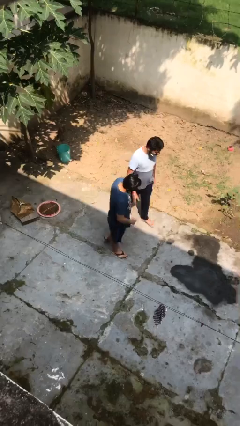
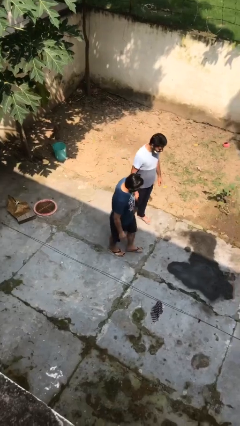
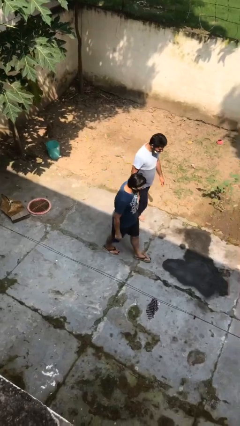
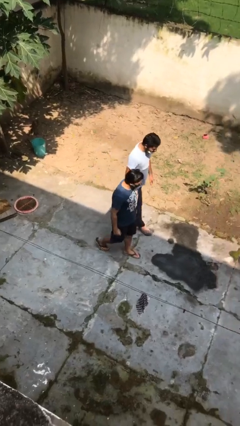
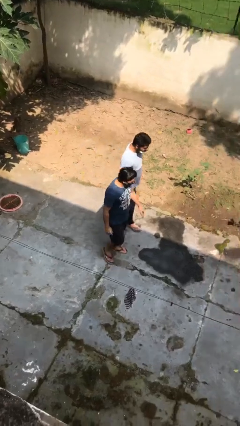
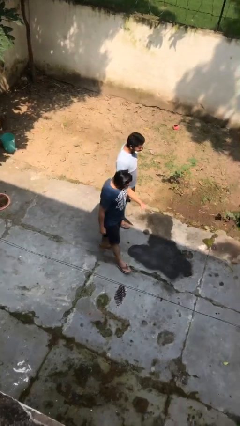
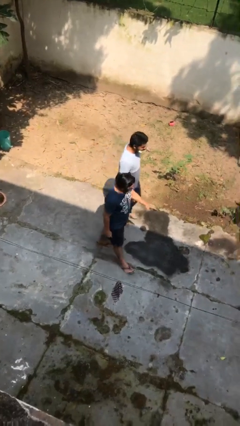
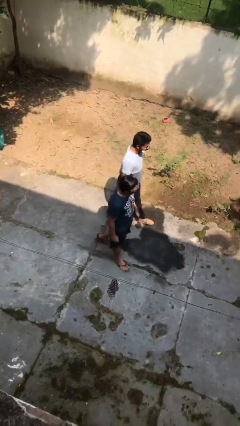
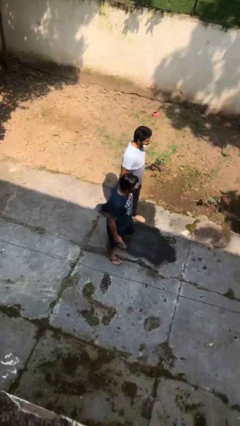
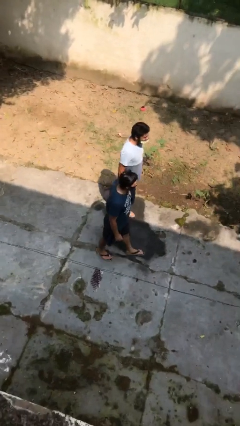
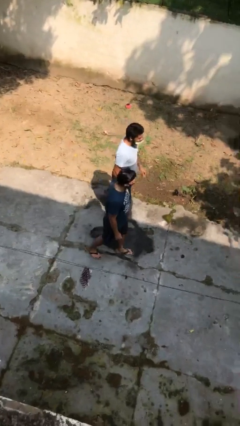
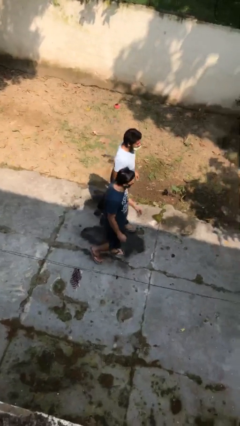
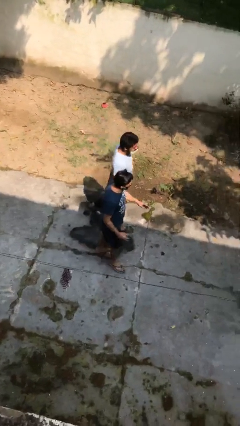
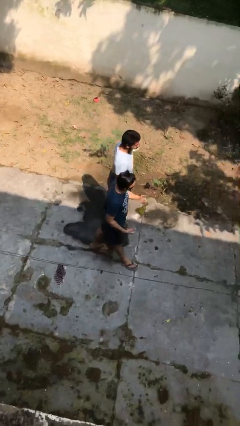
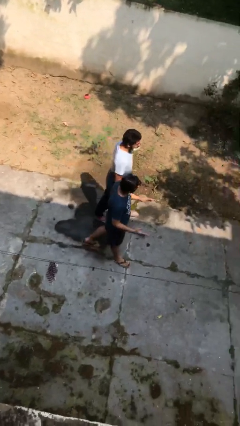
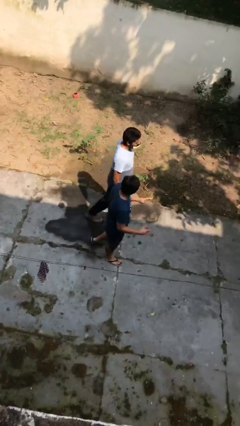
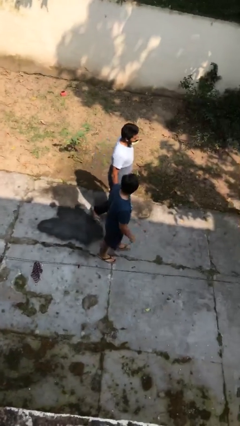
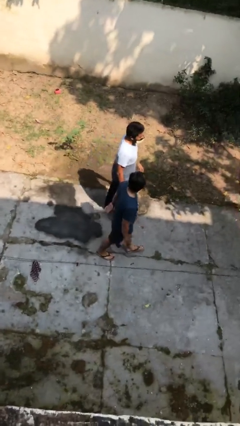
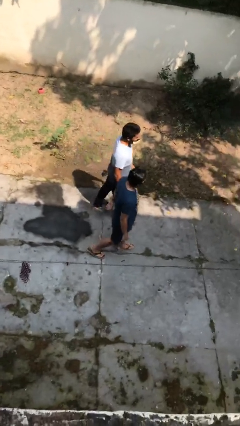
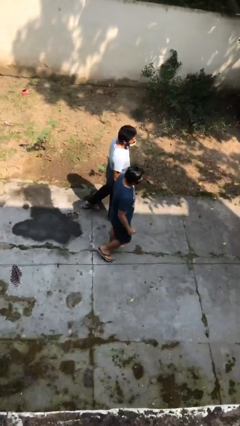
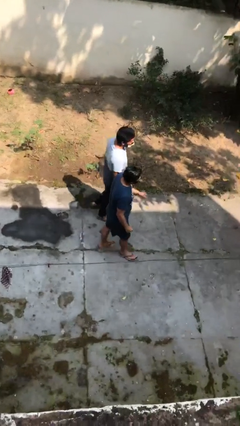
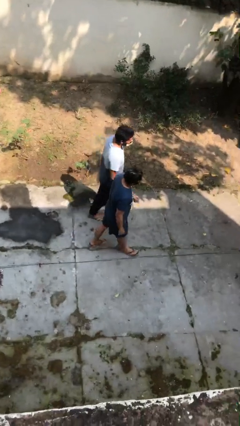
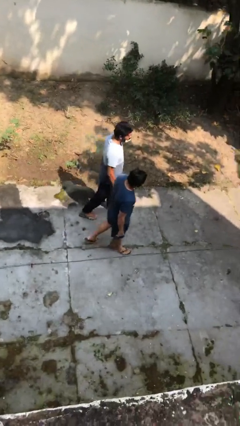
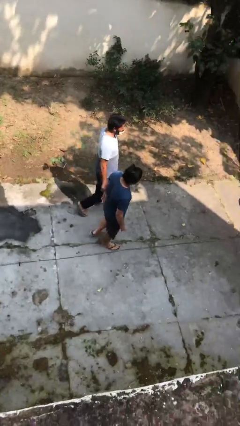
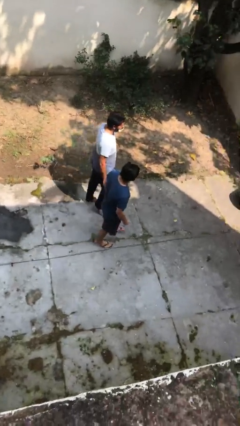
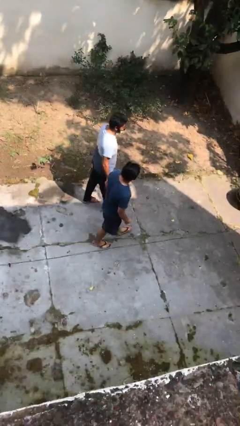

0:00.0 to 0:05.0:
person talks to person

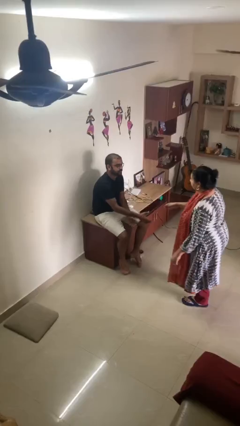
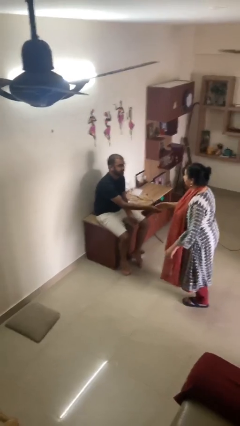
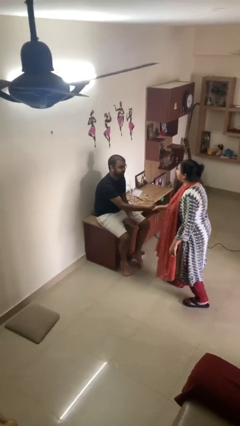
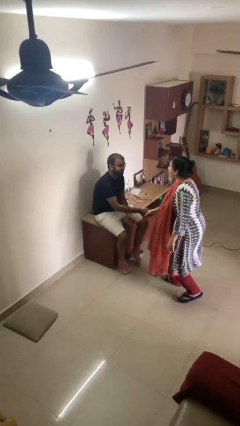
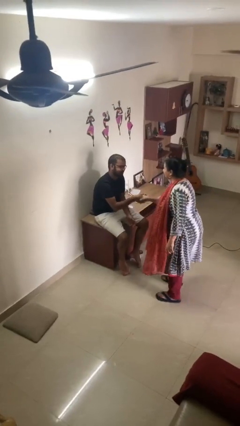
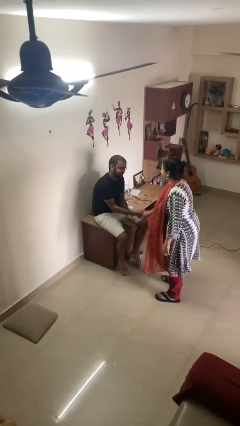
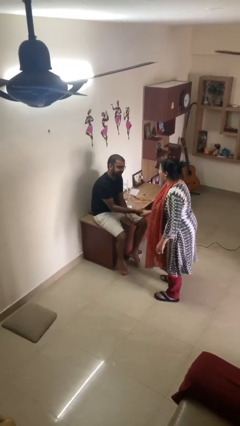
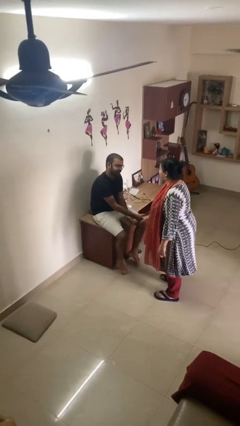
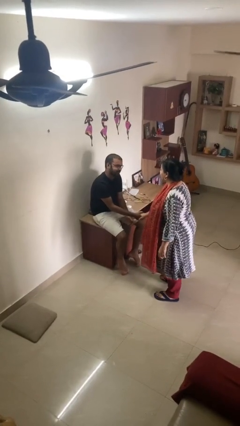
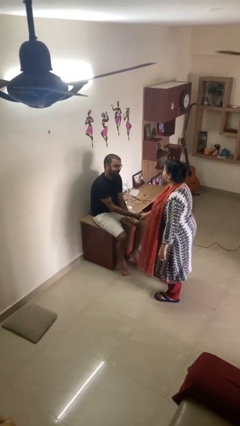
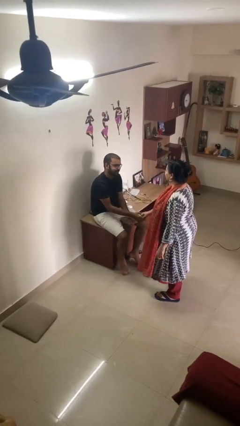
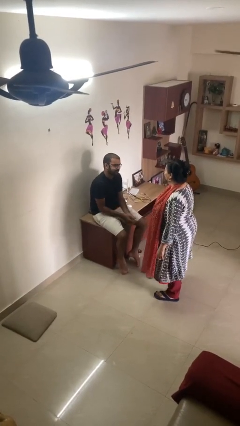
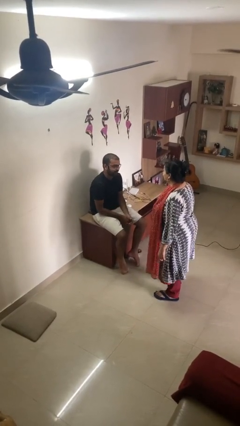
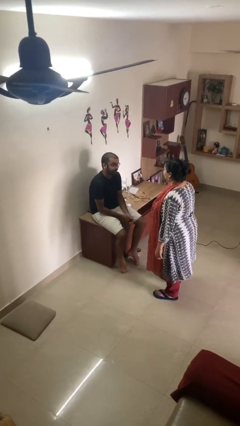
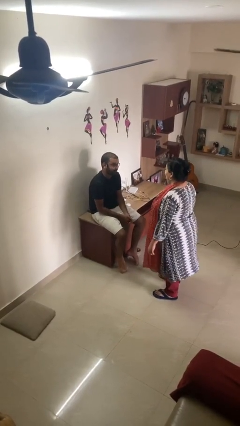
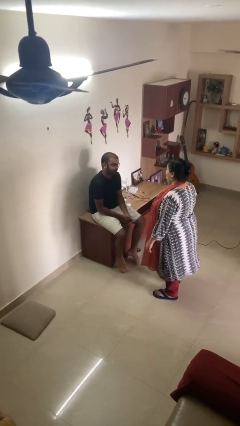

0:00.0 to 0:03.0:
person shakes hand

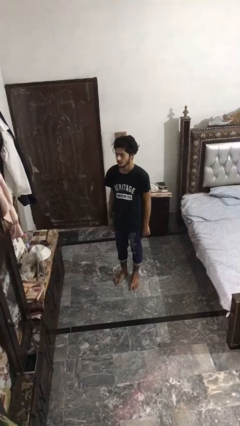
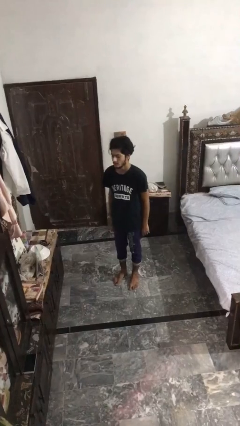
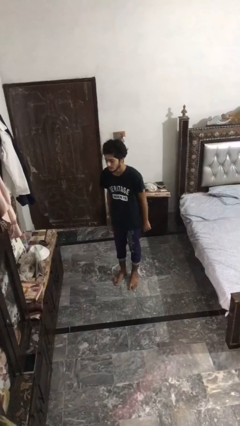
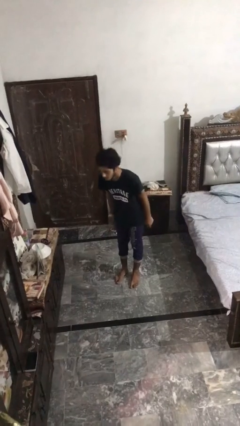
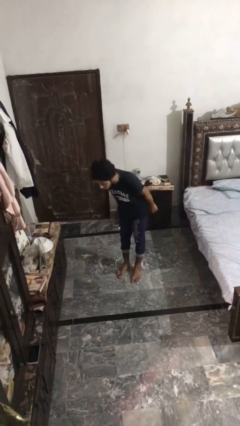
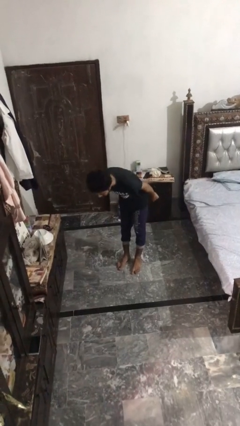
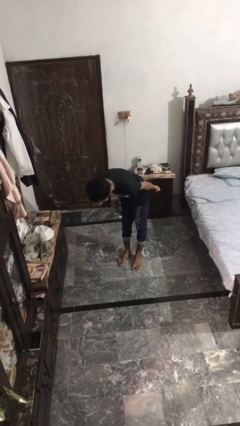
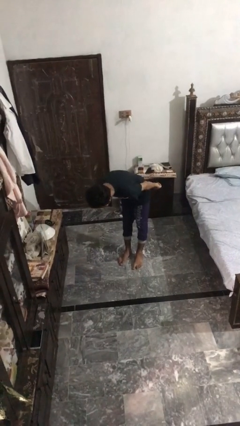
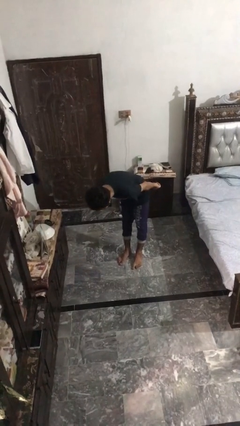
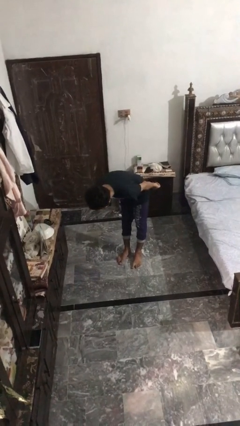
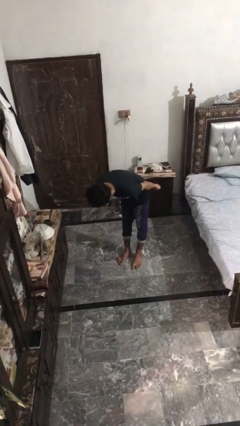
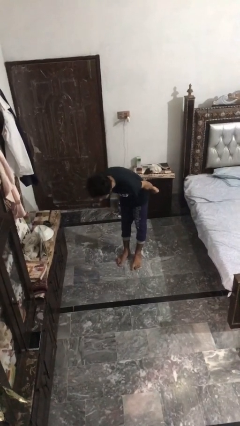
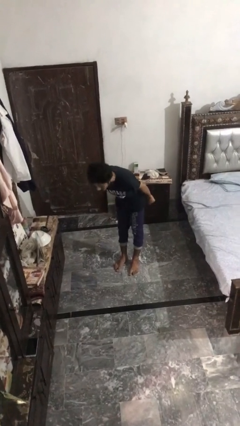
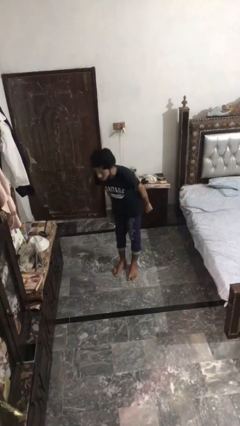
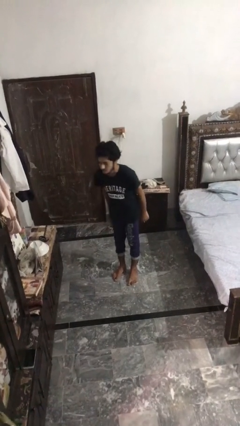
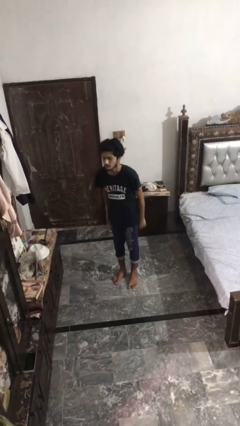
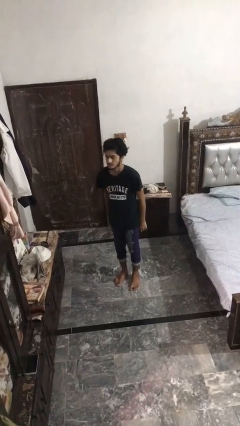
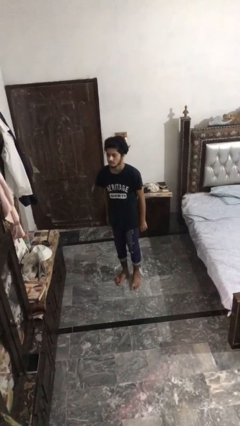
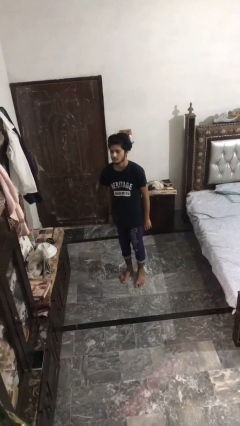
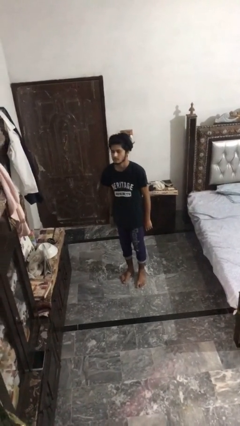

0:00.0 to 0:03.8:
person bows

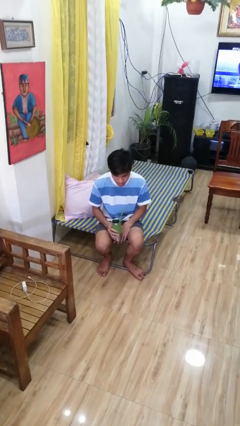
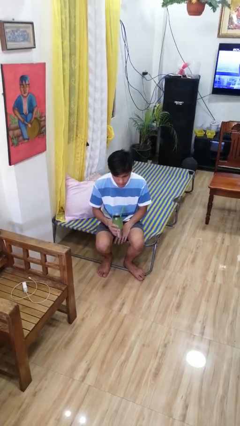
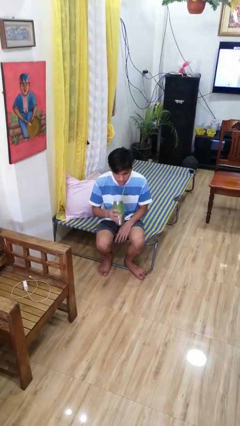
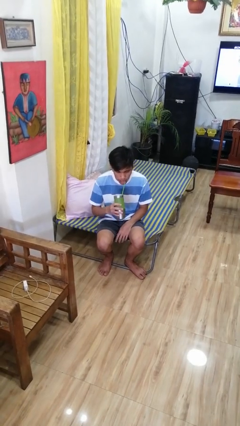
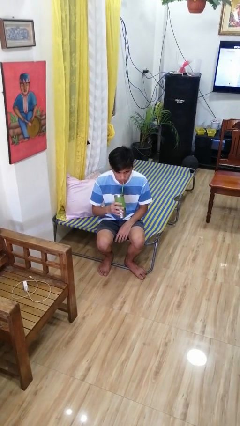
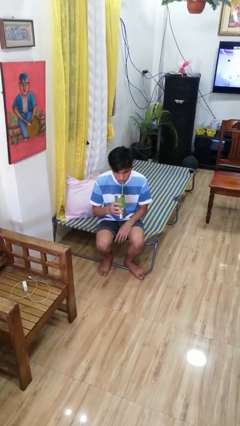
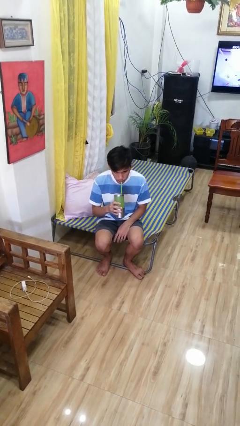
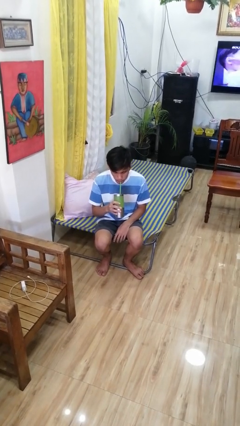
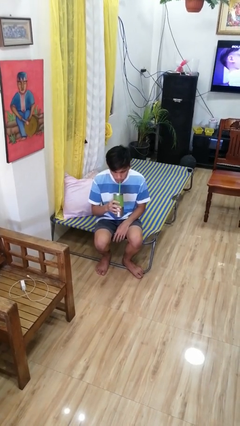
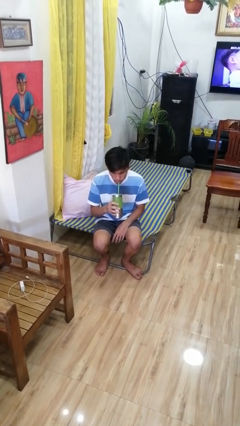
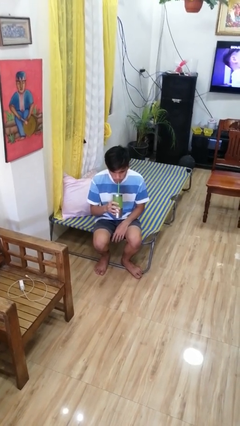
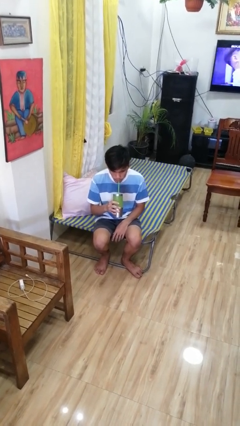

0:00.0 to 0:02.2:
person drinks from straw

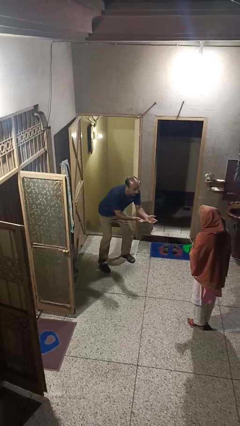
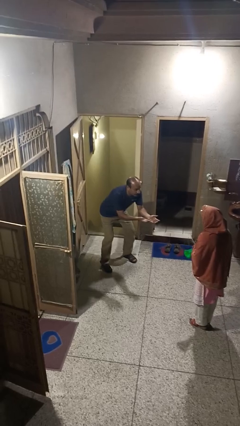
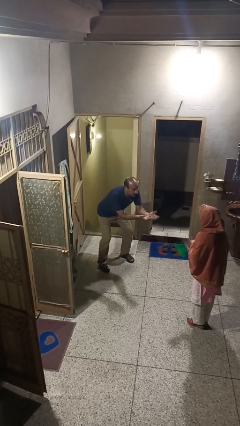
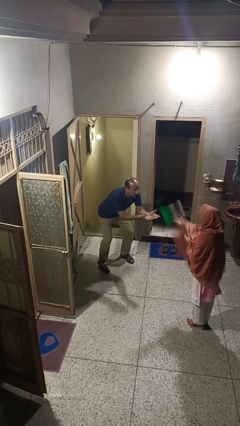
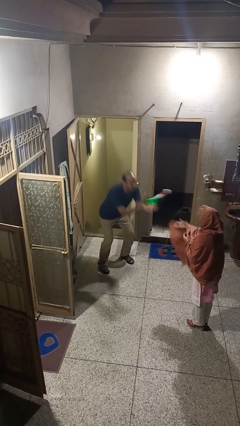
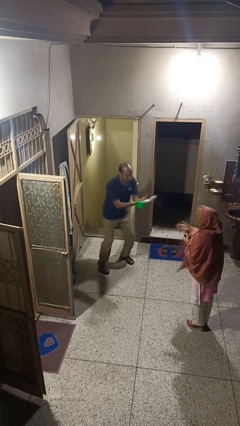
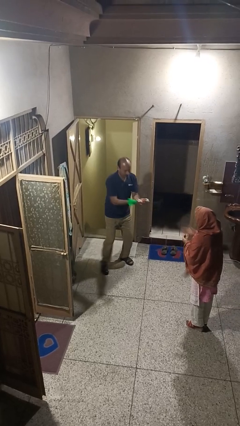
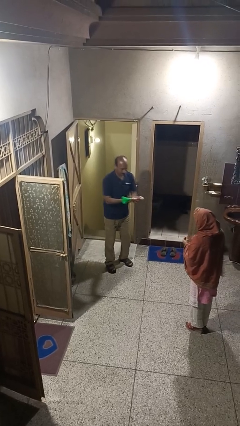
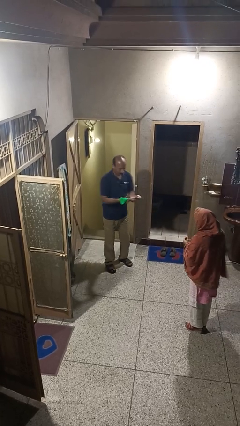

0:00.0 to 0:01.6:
person catches object from person

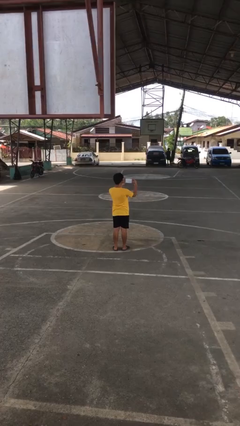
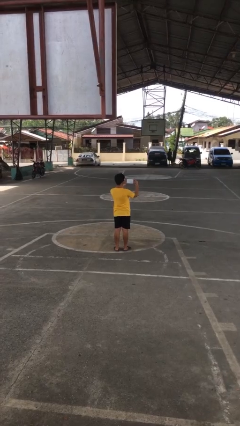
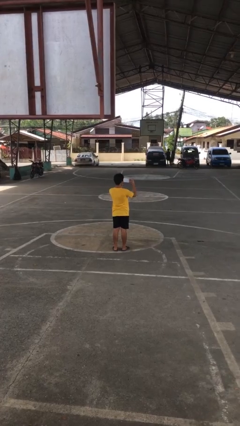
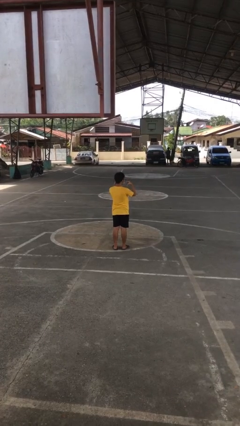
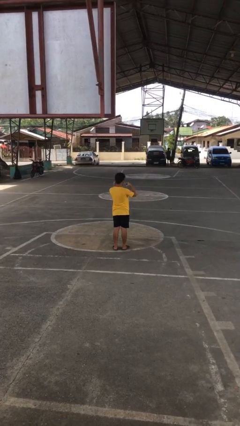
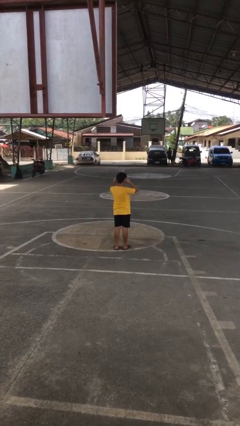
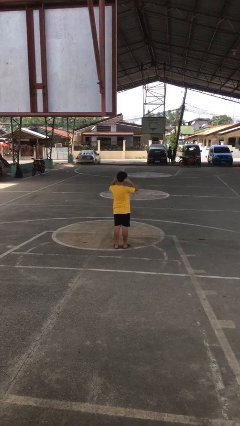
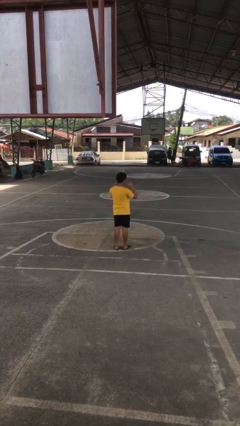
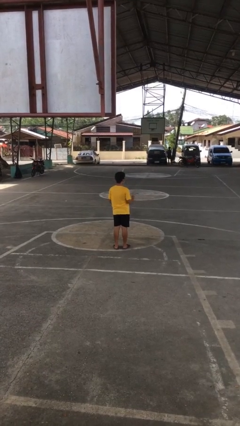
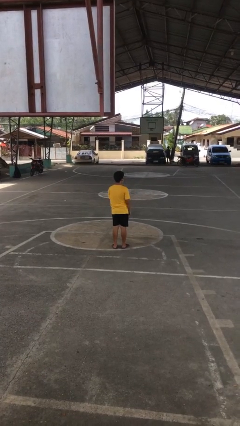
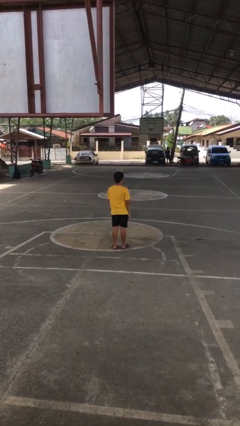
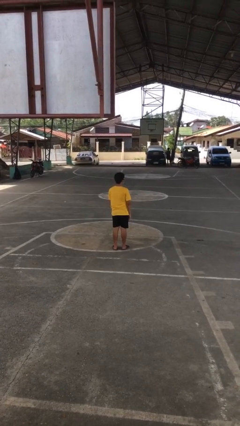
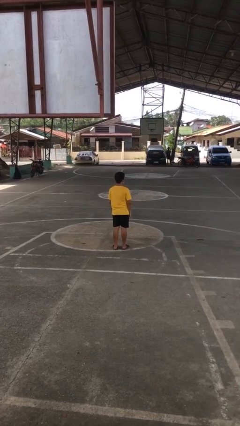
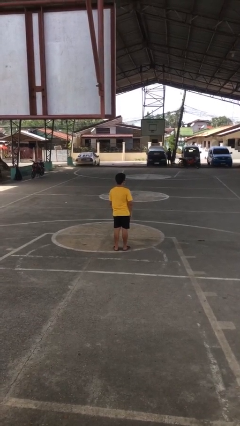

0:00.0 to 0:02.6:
person puts on facemask
